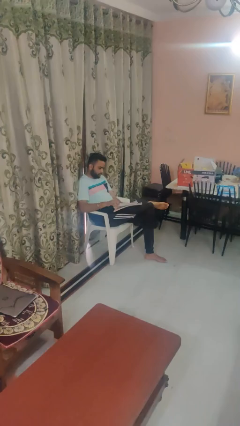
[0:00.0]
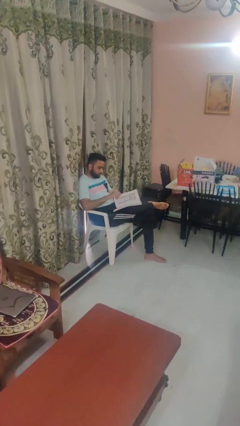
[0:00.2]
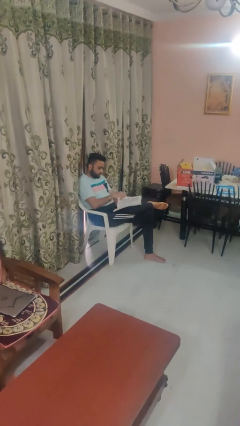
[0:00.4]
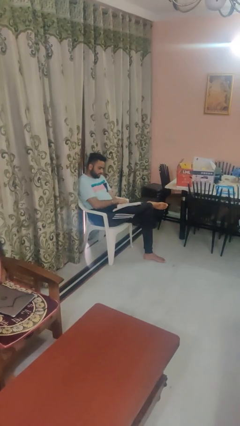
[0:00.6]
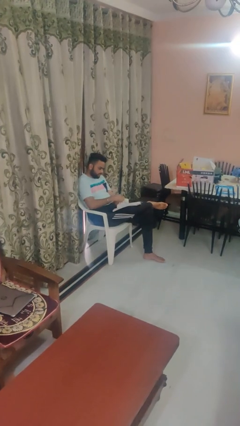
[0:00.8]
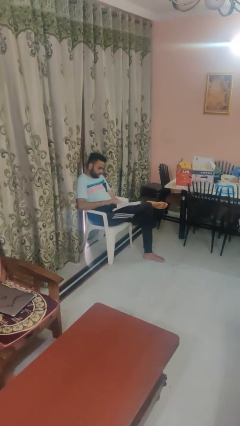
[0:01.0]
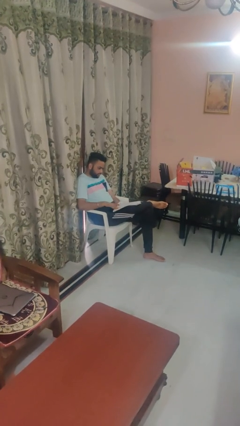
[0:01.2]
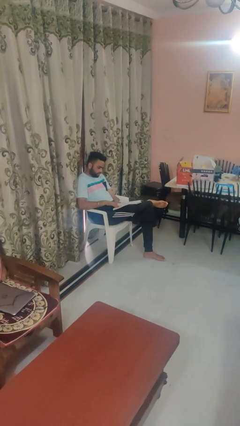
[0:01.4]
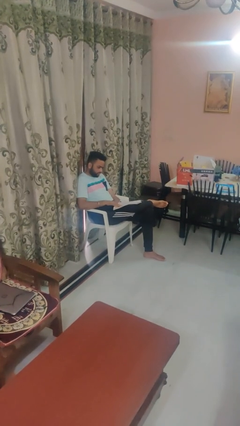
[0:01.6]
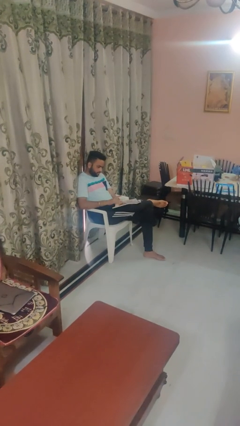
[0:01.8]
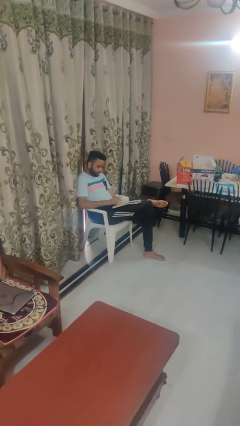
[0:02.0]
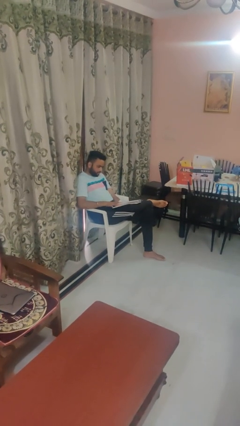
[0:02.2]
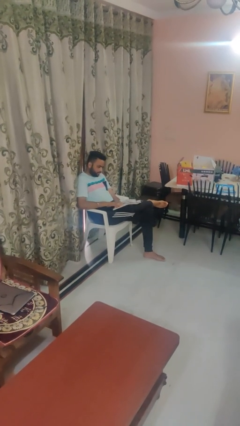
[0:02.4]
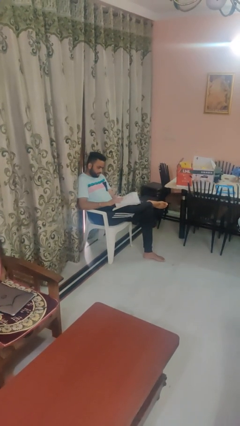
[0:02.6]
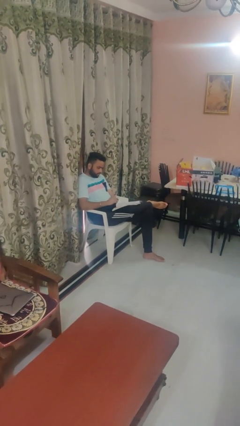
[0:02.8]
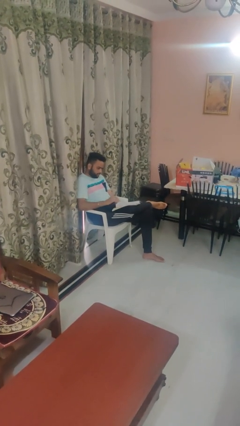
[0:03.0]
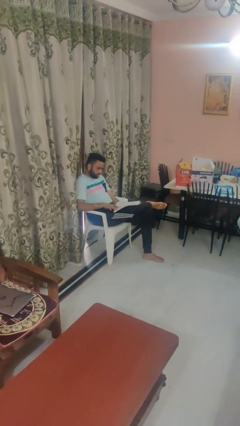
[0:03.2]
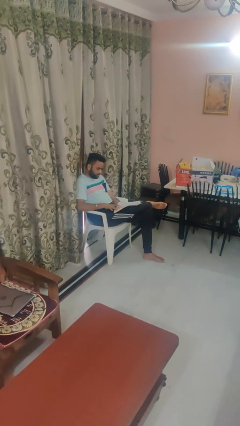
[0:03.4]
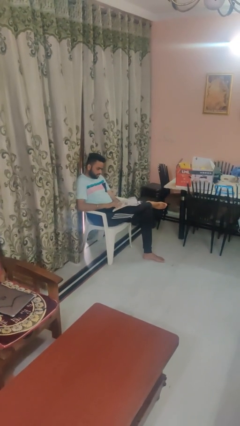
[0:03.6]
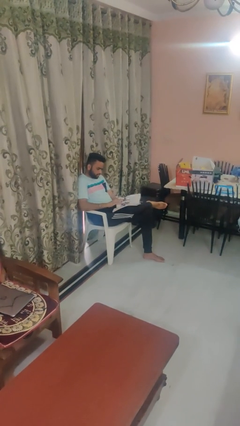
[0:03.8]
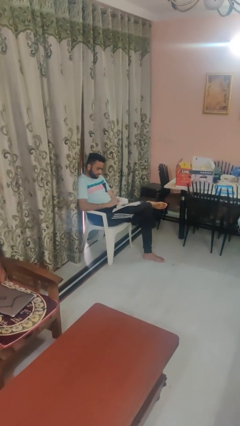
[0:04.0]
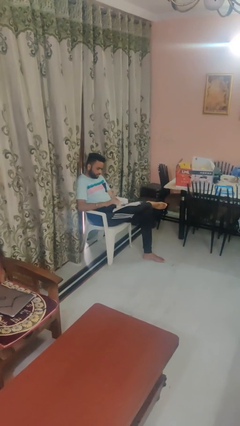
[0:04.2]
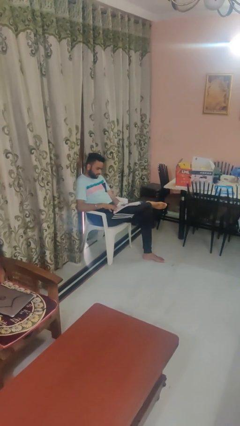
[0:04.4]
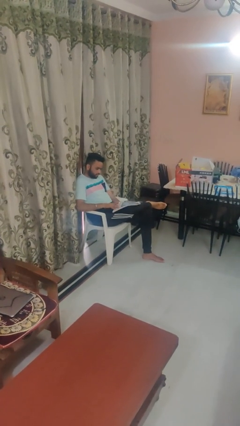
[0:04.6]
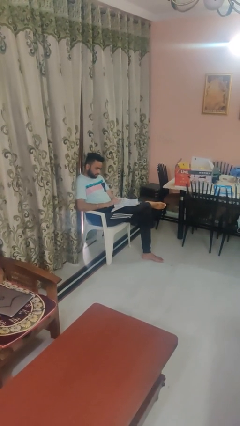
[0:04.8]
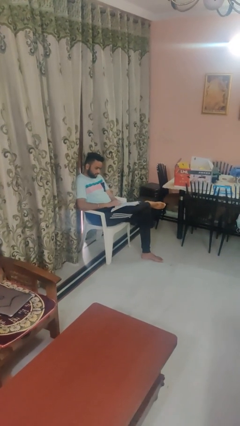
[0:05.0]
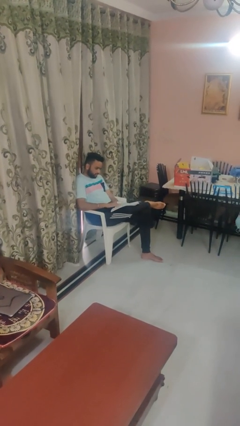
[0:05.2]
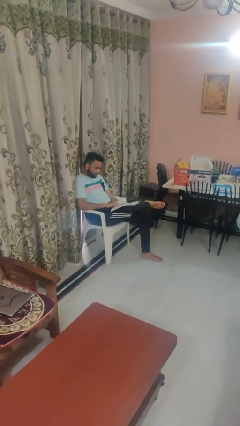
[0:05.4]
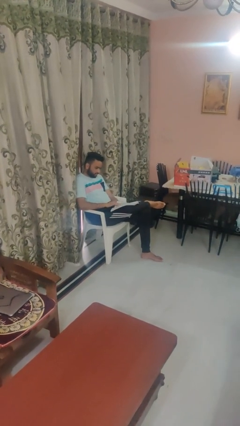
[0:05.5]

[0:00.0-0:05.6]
person reads magazine

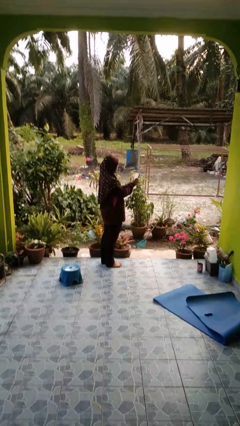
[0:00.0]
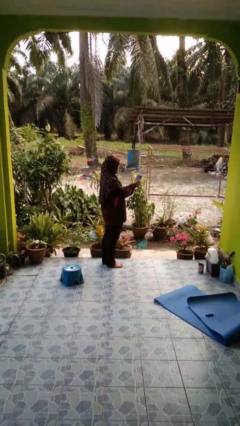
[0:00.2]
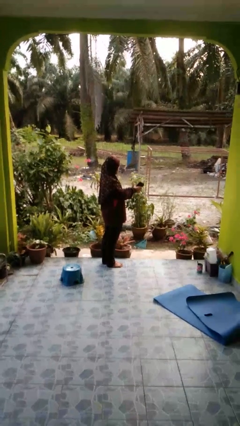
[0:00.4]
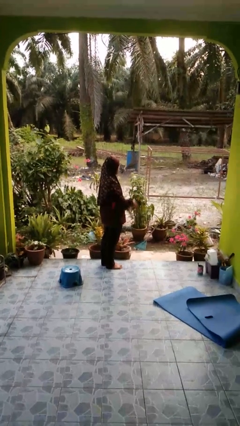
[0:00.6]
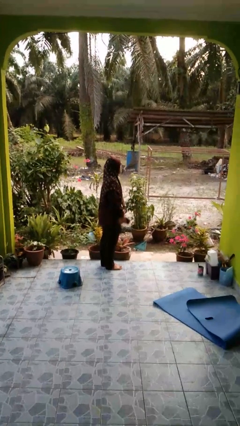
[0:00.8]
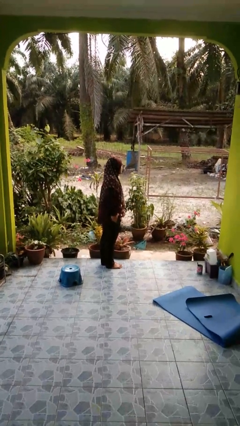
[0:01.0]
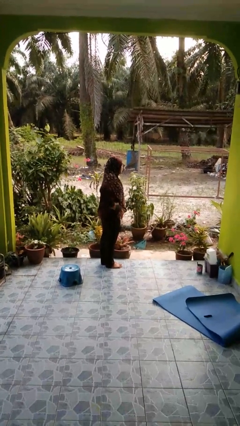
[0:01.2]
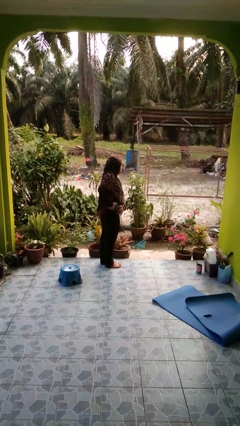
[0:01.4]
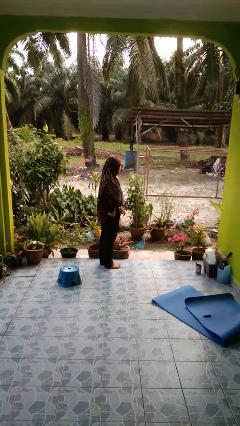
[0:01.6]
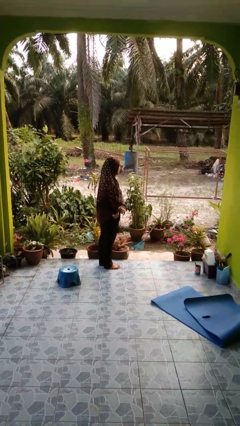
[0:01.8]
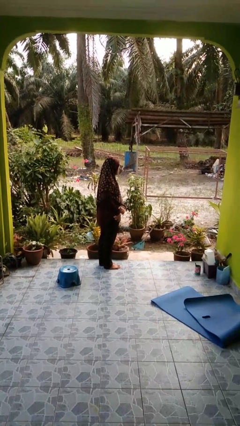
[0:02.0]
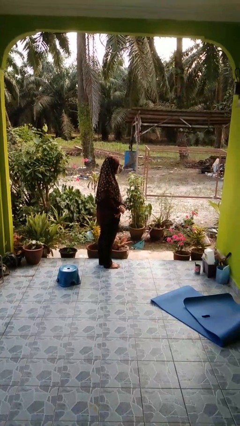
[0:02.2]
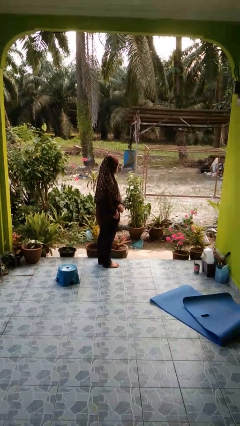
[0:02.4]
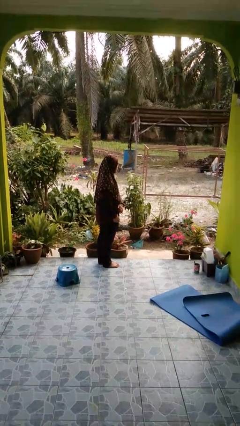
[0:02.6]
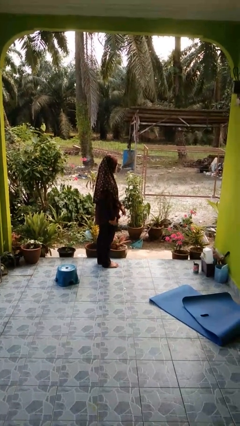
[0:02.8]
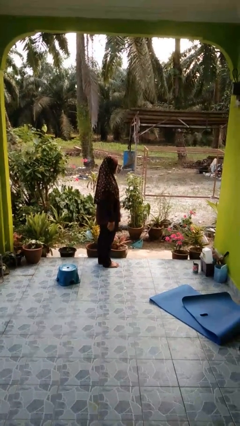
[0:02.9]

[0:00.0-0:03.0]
person puts phone into pocket

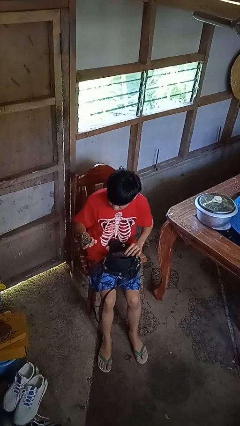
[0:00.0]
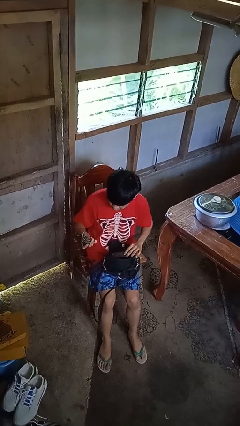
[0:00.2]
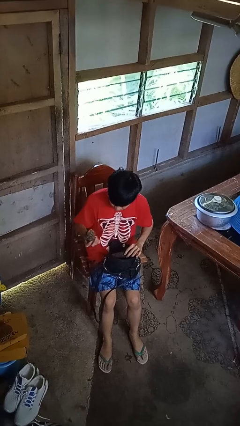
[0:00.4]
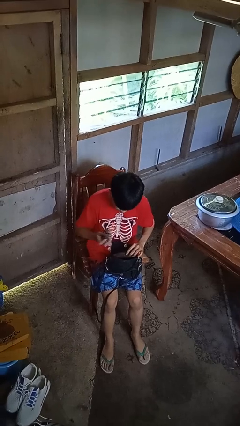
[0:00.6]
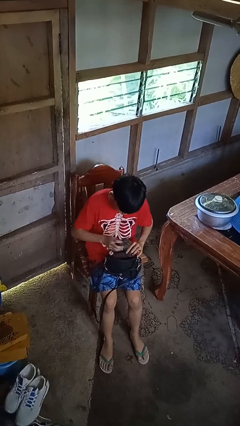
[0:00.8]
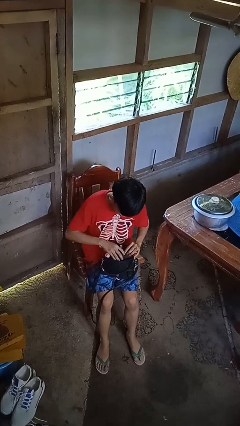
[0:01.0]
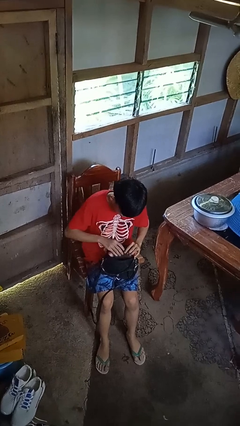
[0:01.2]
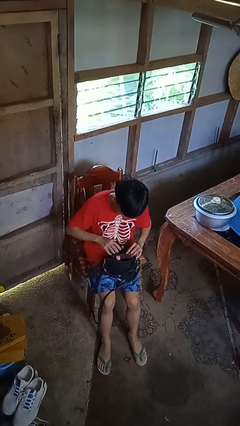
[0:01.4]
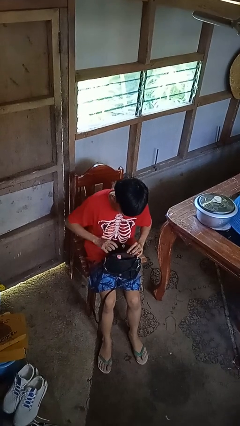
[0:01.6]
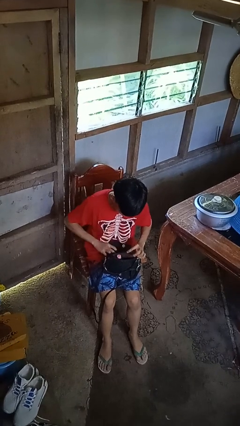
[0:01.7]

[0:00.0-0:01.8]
person puts object into purse

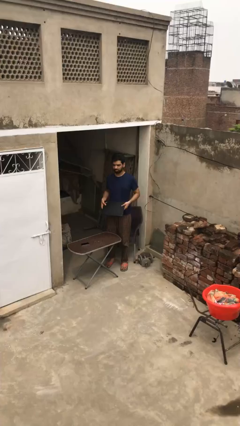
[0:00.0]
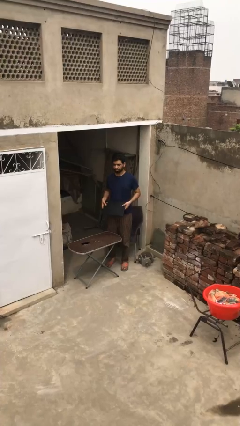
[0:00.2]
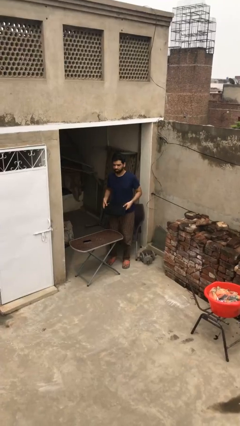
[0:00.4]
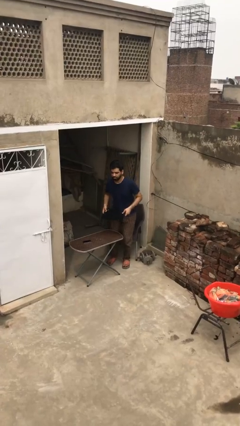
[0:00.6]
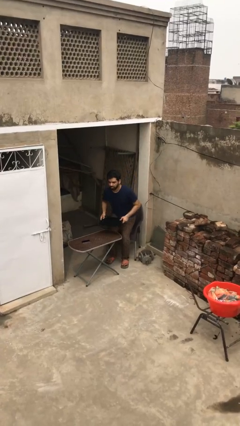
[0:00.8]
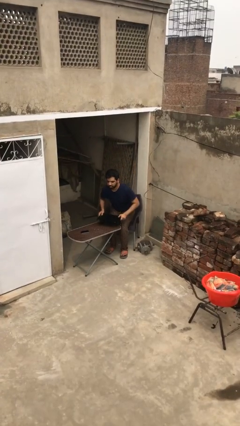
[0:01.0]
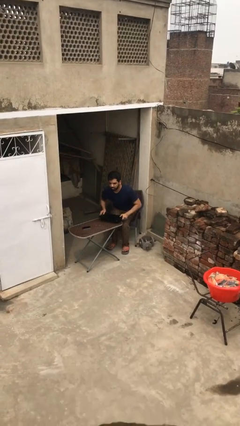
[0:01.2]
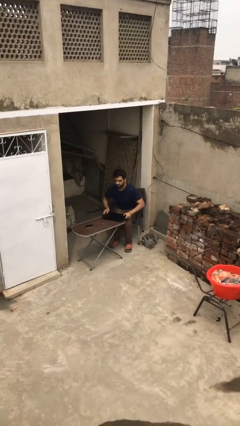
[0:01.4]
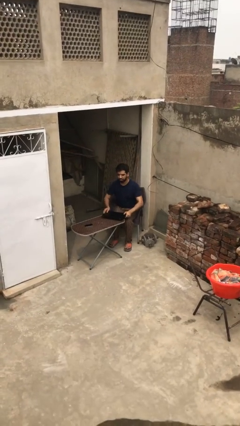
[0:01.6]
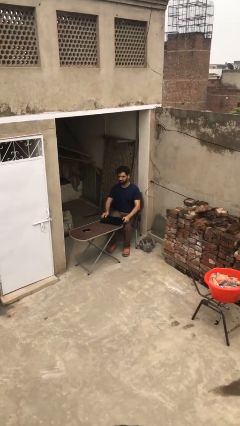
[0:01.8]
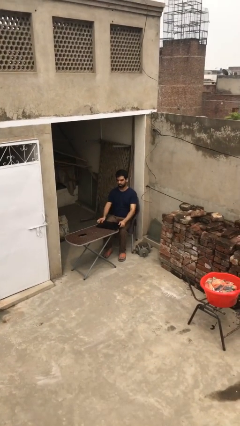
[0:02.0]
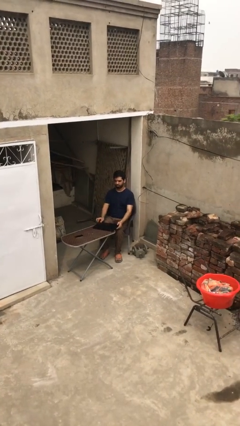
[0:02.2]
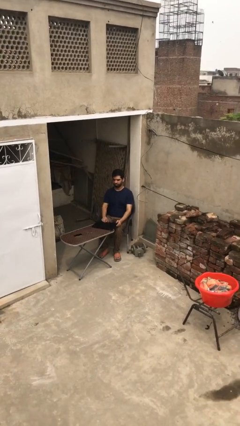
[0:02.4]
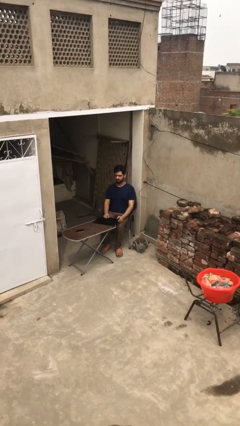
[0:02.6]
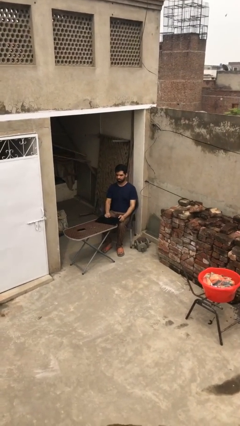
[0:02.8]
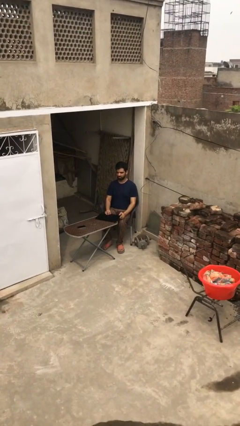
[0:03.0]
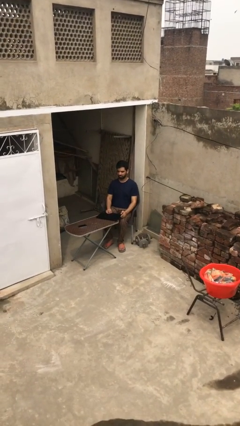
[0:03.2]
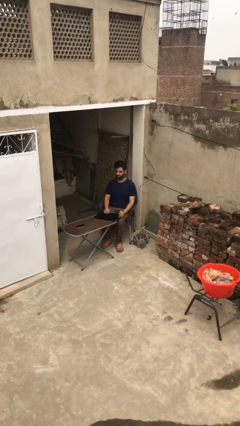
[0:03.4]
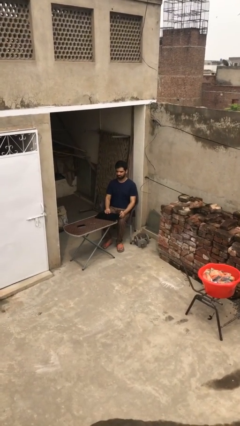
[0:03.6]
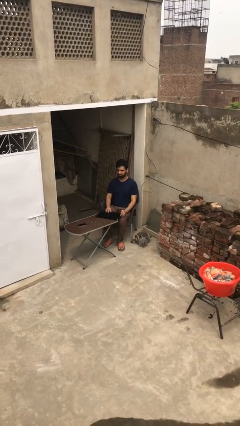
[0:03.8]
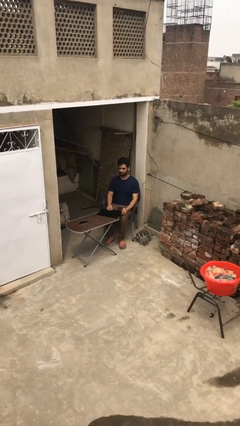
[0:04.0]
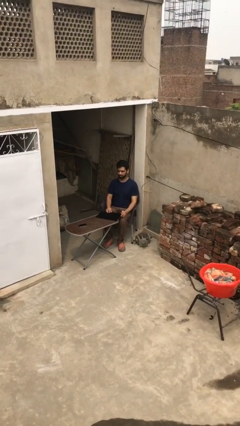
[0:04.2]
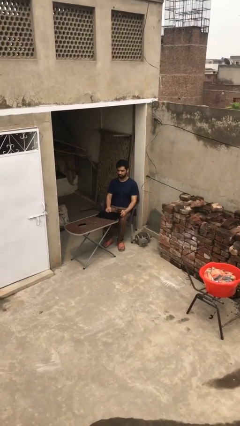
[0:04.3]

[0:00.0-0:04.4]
person sits down

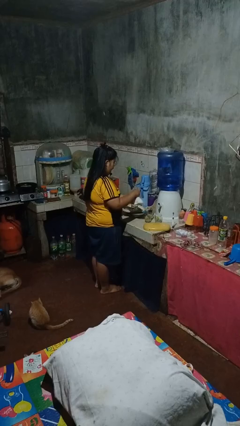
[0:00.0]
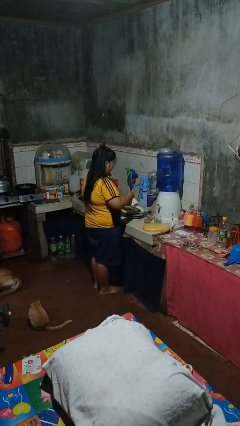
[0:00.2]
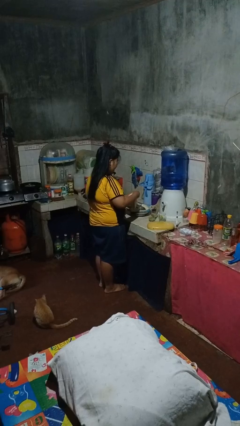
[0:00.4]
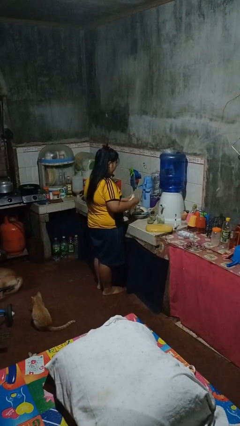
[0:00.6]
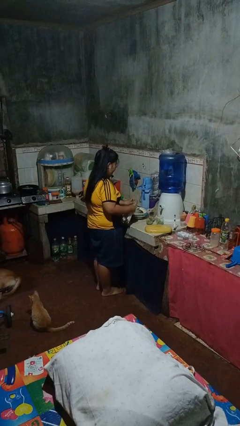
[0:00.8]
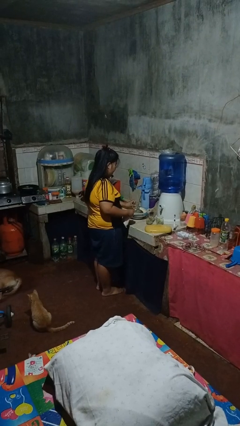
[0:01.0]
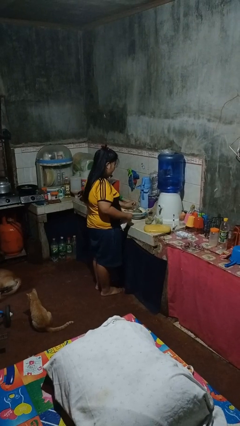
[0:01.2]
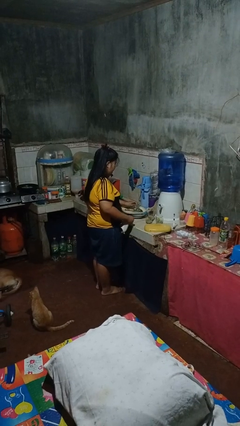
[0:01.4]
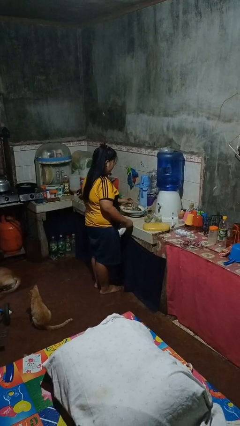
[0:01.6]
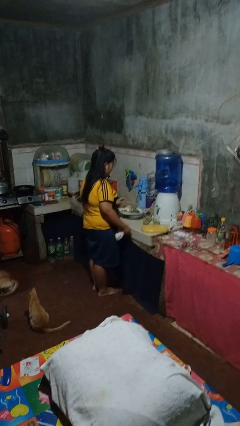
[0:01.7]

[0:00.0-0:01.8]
person dries dish

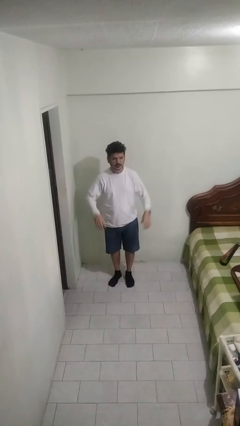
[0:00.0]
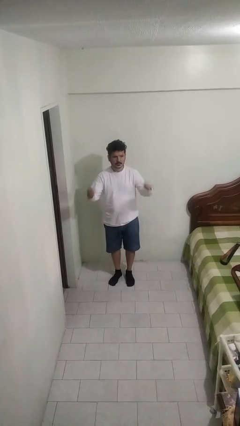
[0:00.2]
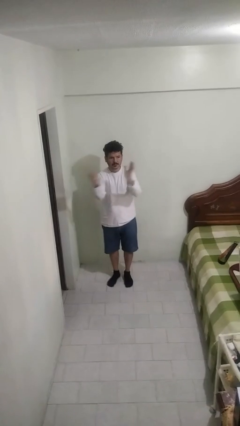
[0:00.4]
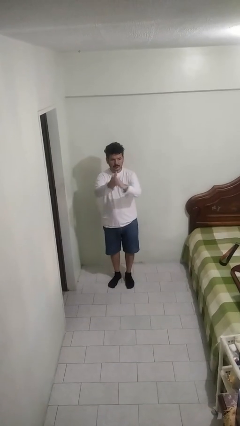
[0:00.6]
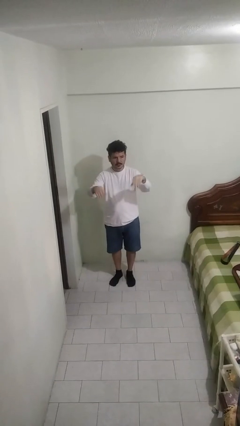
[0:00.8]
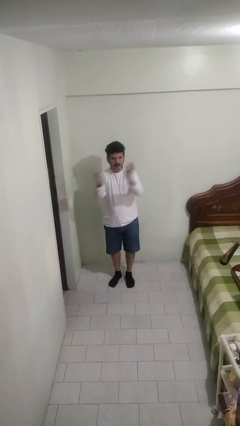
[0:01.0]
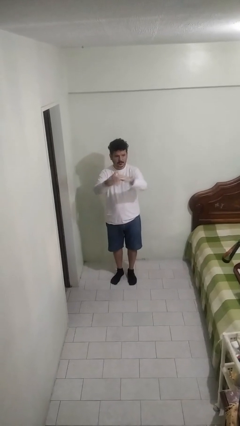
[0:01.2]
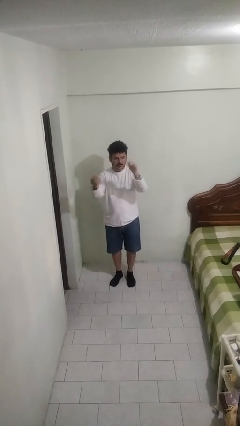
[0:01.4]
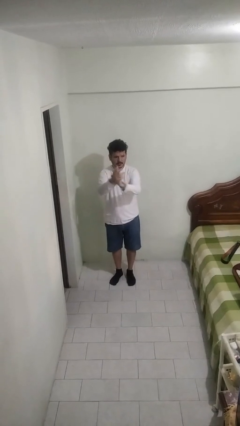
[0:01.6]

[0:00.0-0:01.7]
person claps hands
